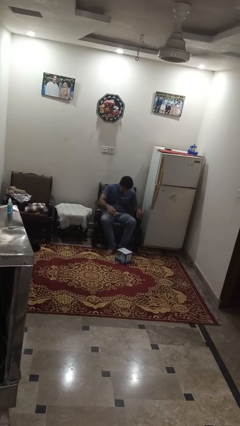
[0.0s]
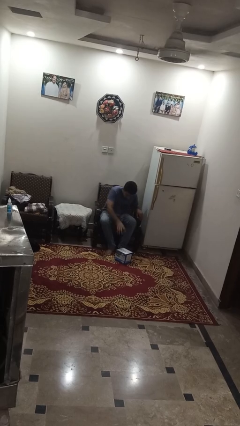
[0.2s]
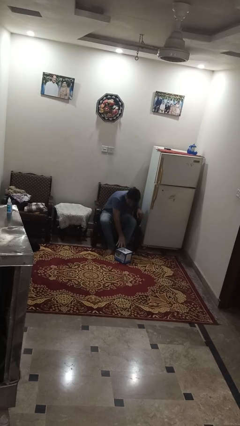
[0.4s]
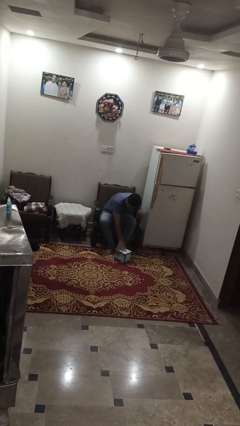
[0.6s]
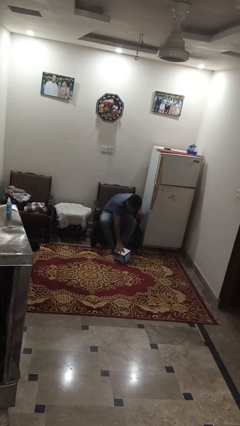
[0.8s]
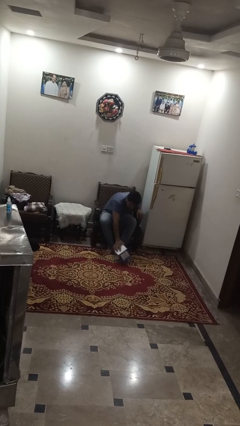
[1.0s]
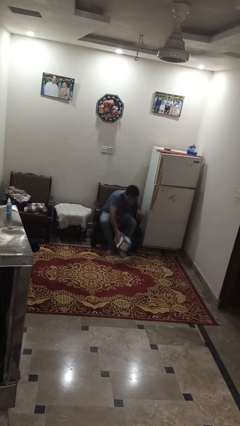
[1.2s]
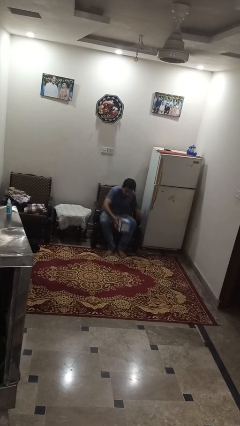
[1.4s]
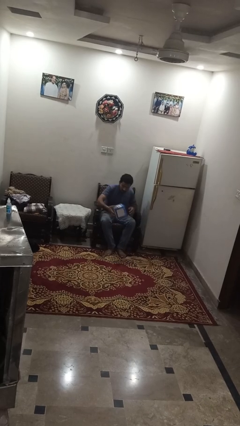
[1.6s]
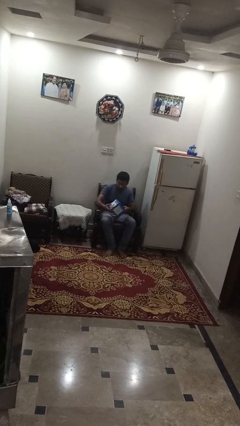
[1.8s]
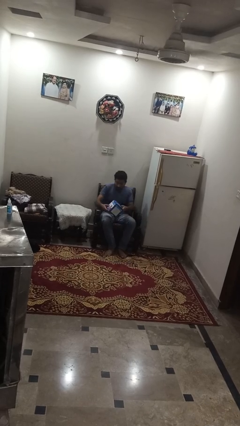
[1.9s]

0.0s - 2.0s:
person picks up object from floor

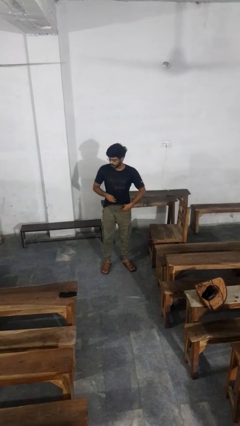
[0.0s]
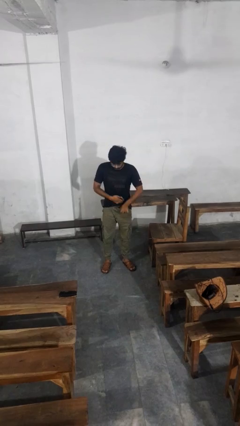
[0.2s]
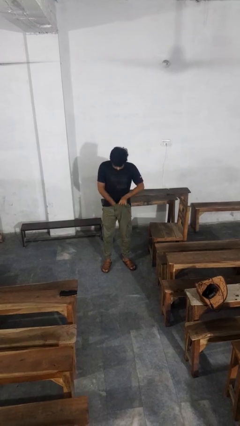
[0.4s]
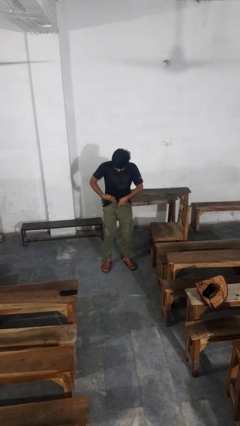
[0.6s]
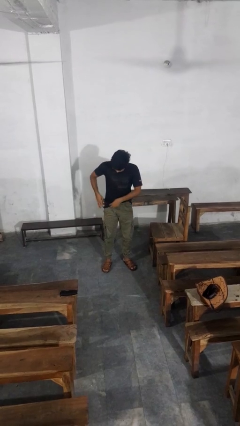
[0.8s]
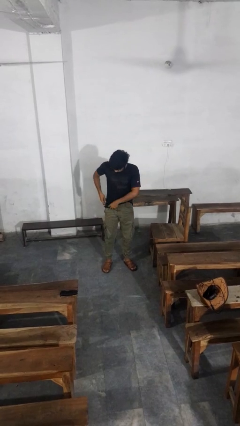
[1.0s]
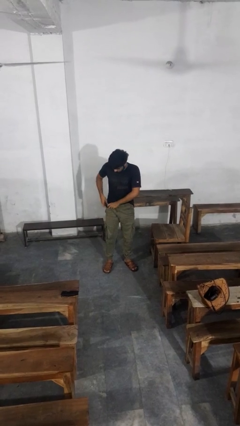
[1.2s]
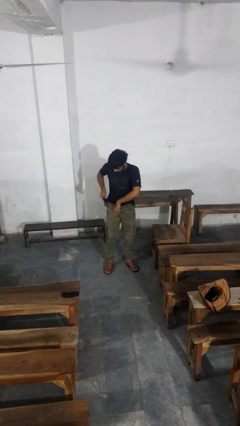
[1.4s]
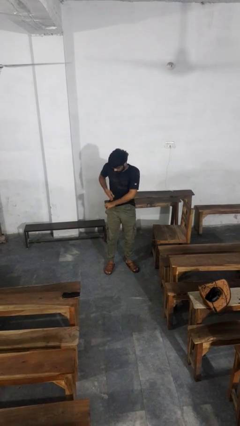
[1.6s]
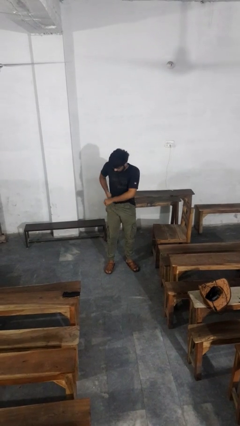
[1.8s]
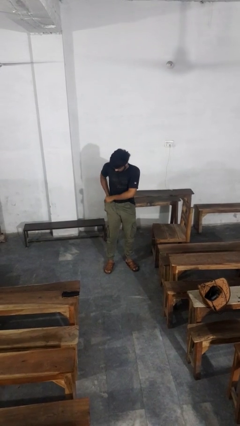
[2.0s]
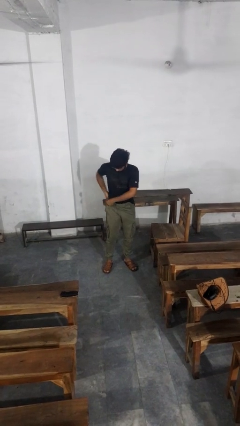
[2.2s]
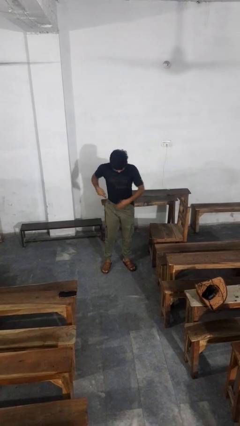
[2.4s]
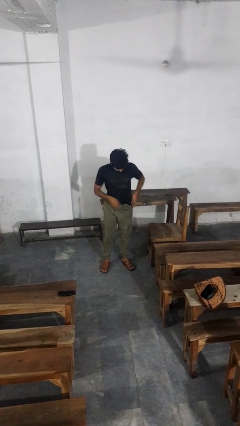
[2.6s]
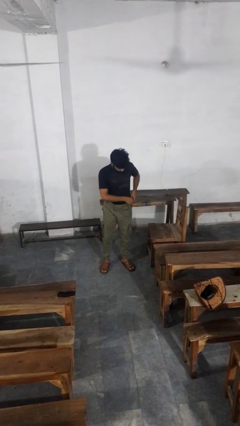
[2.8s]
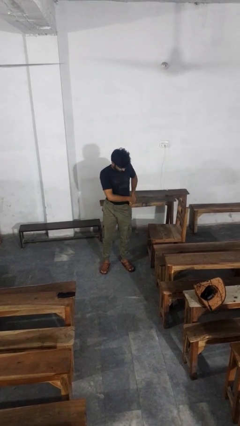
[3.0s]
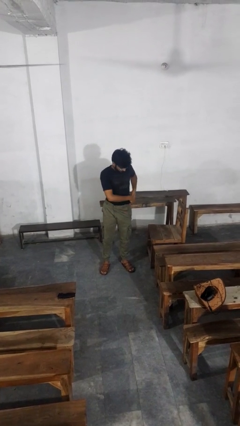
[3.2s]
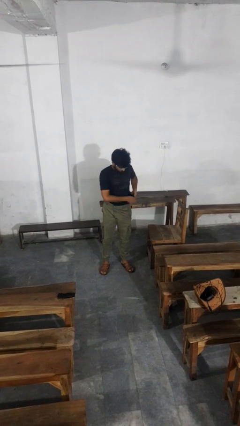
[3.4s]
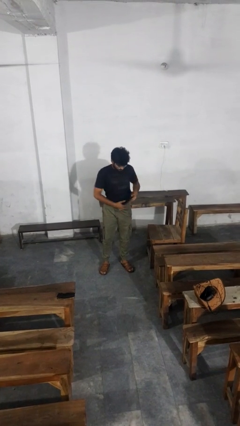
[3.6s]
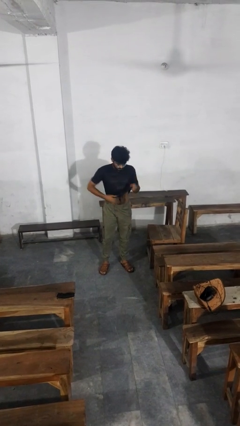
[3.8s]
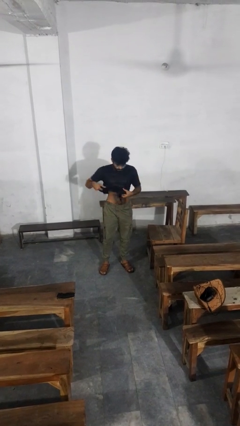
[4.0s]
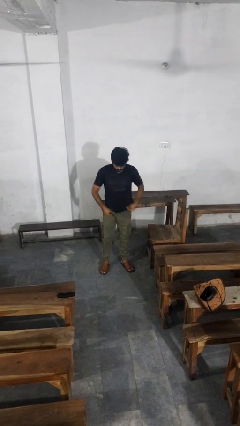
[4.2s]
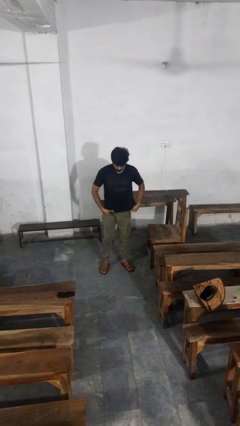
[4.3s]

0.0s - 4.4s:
person tucks in shirt

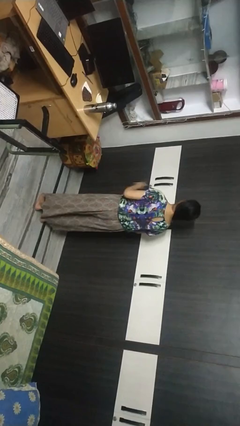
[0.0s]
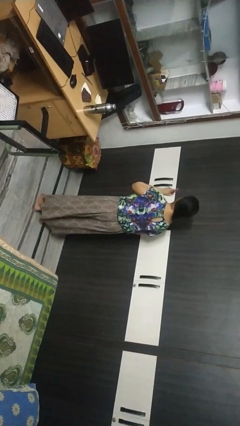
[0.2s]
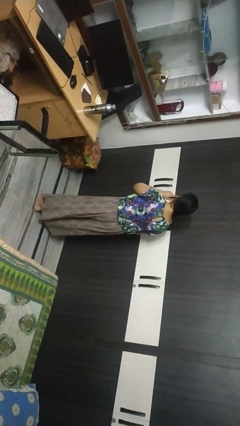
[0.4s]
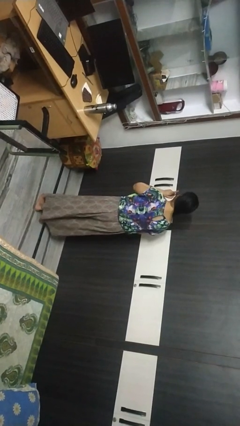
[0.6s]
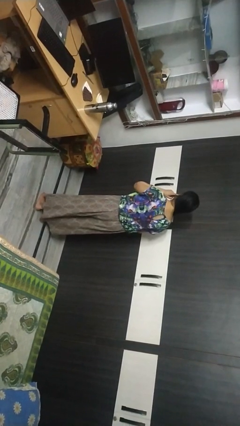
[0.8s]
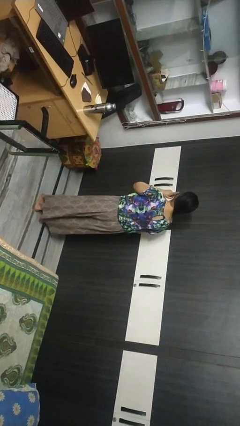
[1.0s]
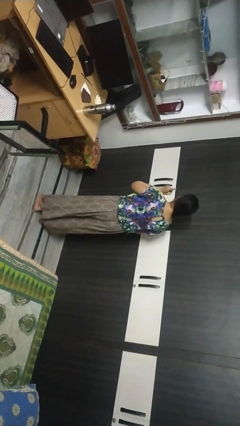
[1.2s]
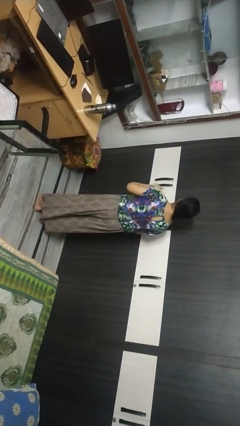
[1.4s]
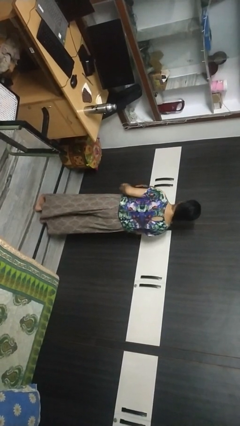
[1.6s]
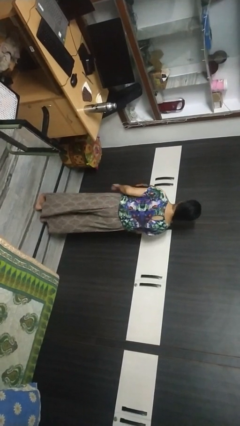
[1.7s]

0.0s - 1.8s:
person gestures listen closely

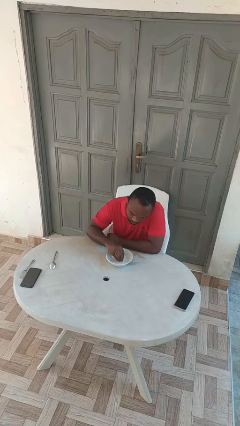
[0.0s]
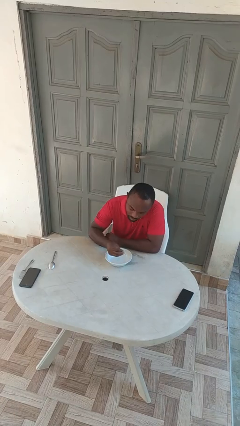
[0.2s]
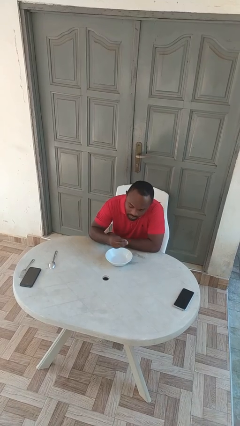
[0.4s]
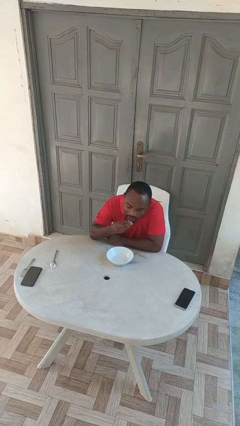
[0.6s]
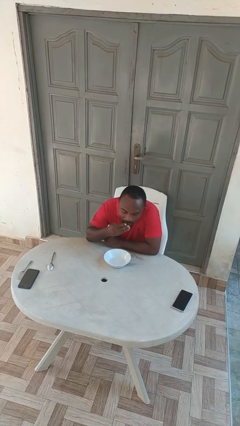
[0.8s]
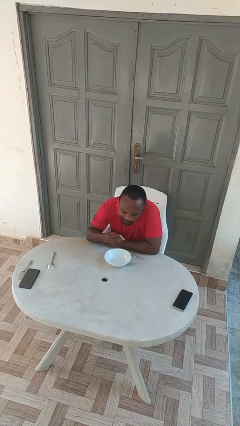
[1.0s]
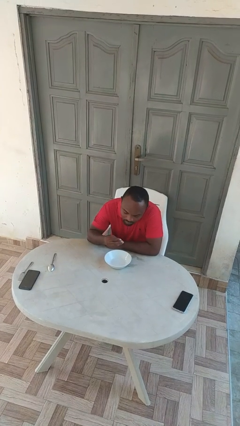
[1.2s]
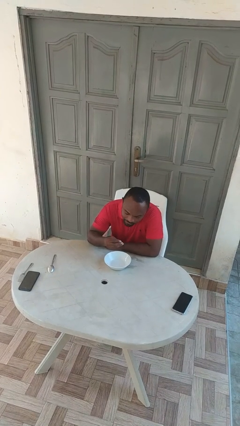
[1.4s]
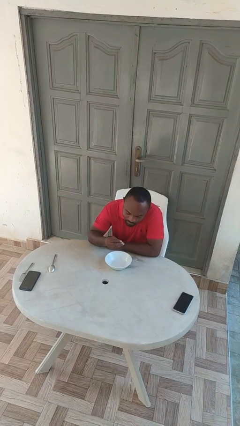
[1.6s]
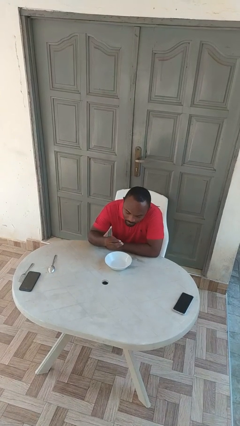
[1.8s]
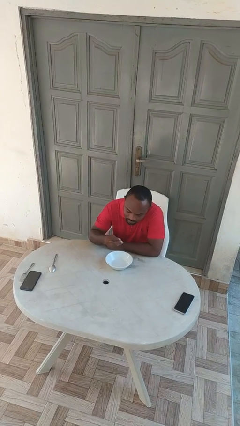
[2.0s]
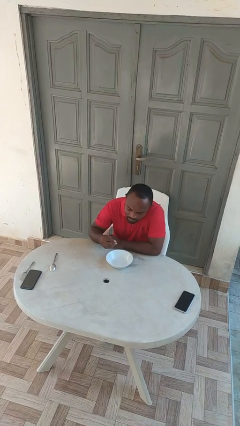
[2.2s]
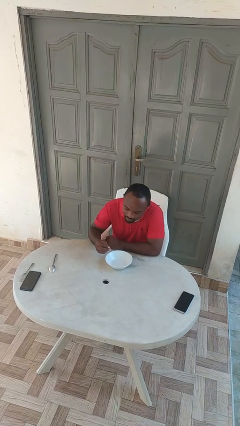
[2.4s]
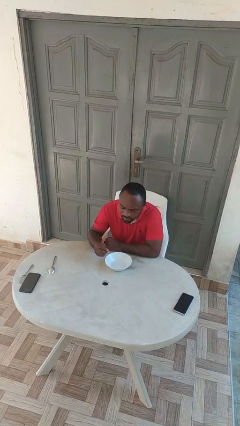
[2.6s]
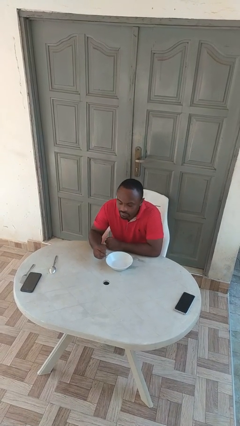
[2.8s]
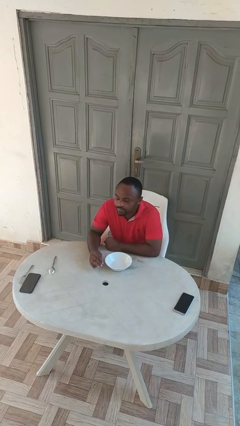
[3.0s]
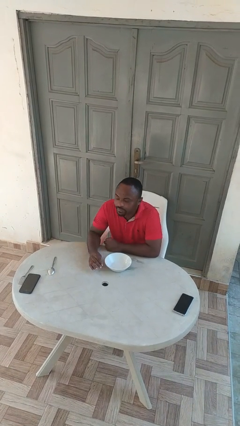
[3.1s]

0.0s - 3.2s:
person eats with hands

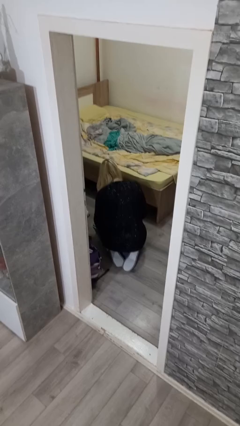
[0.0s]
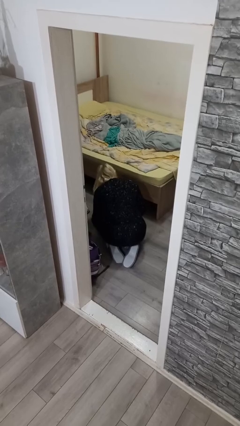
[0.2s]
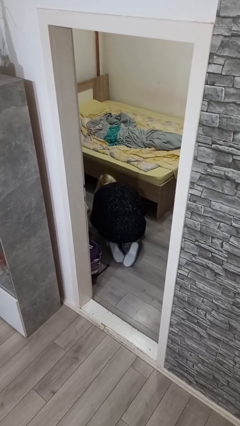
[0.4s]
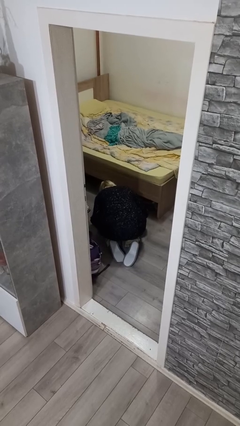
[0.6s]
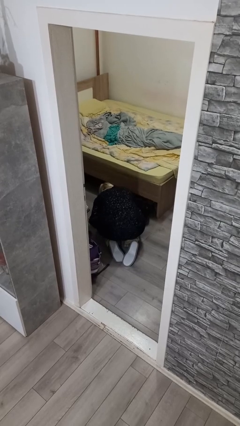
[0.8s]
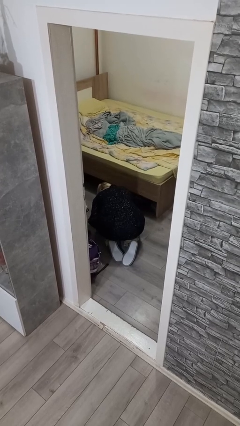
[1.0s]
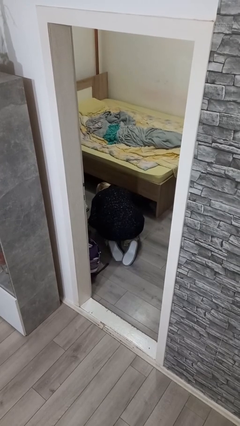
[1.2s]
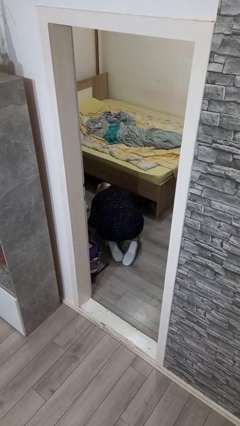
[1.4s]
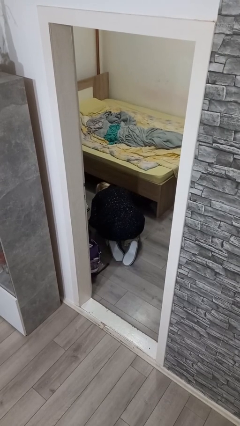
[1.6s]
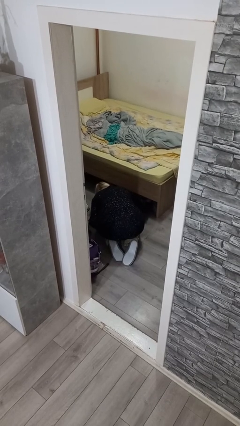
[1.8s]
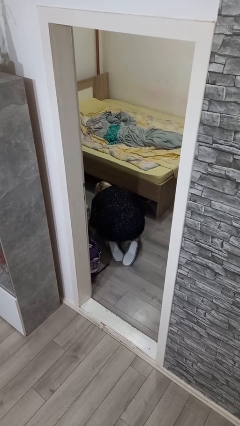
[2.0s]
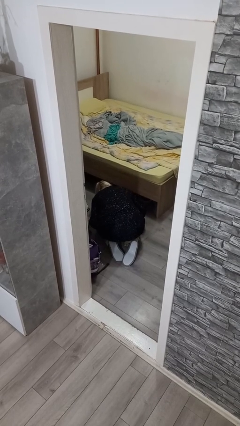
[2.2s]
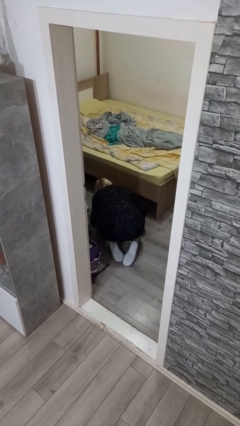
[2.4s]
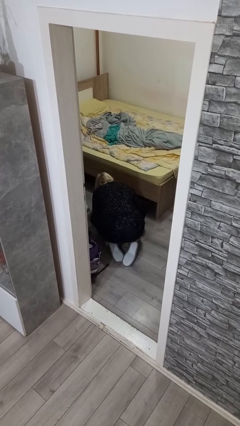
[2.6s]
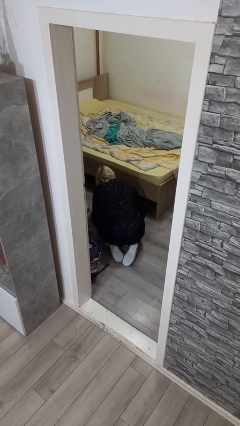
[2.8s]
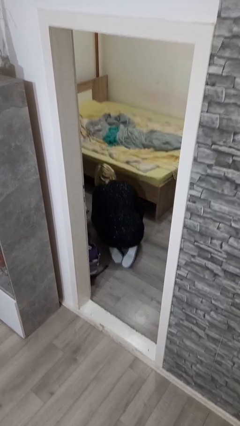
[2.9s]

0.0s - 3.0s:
person searches under bed

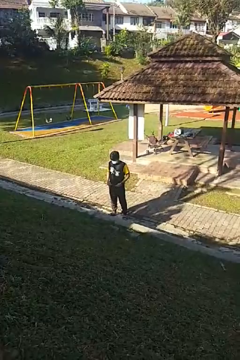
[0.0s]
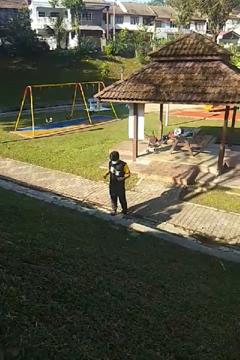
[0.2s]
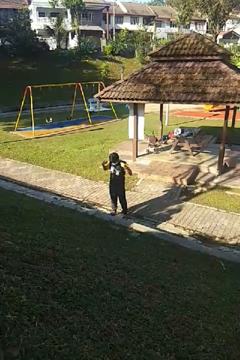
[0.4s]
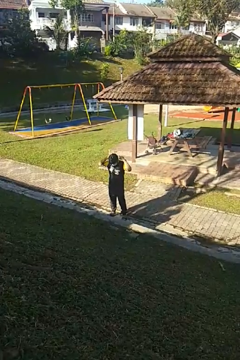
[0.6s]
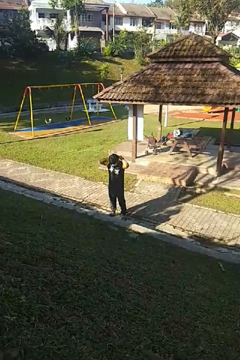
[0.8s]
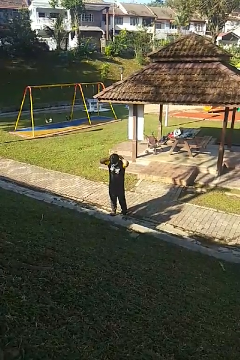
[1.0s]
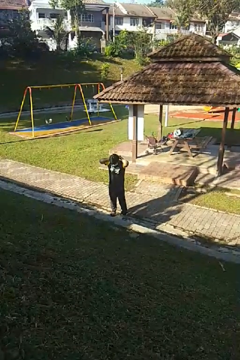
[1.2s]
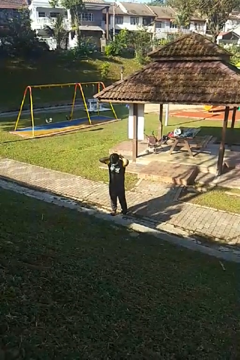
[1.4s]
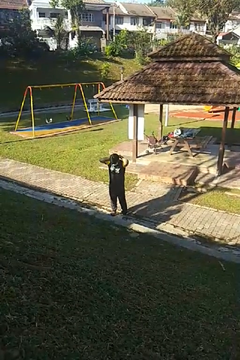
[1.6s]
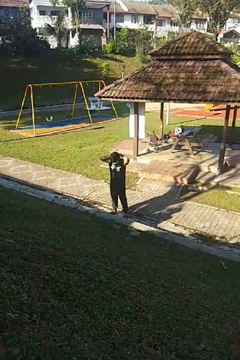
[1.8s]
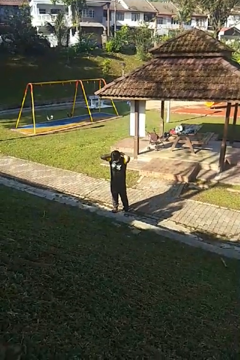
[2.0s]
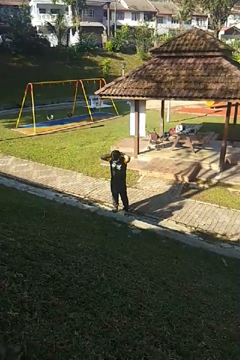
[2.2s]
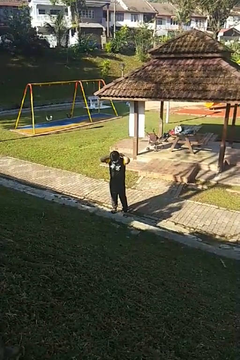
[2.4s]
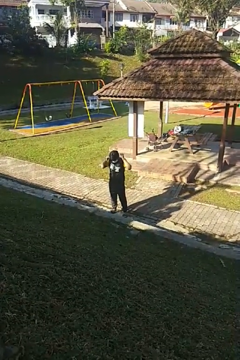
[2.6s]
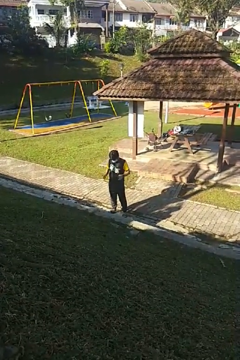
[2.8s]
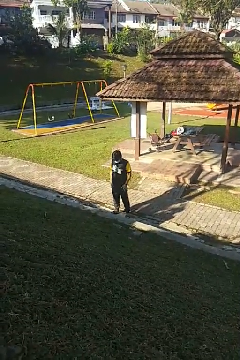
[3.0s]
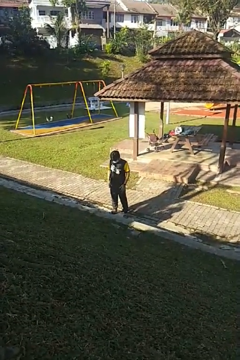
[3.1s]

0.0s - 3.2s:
person puts on necklace
